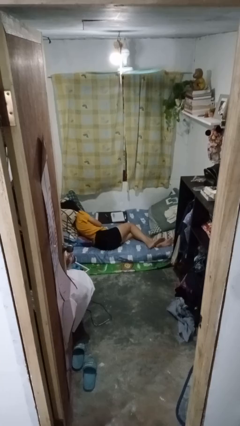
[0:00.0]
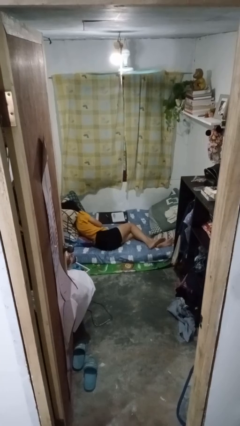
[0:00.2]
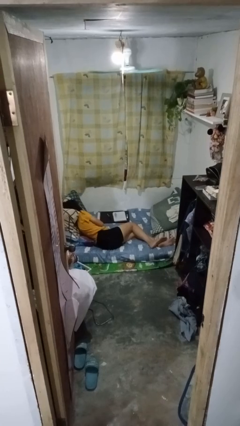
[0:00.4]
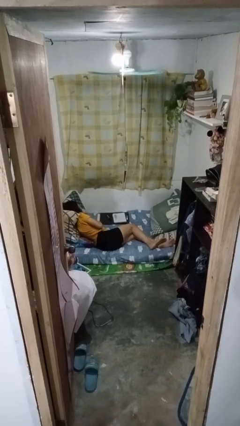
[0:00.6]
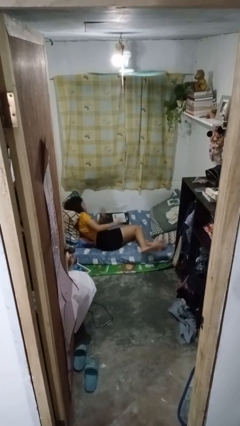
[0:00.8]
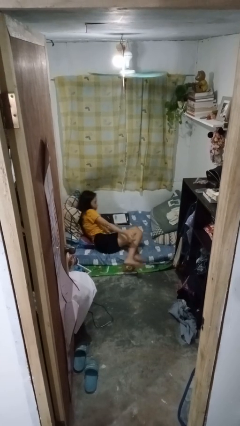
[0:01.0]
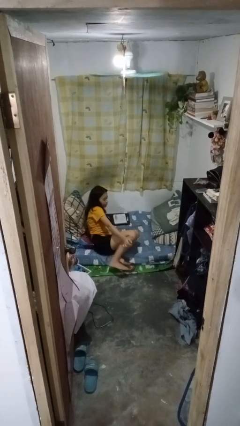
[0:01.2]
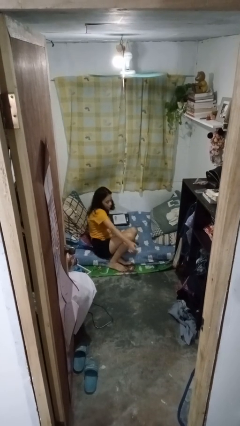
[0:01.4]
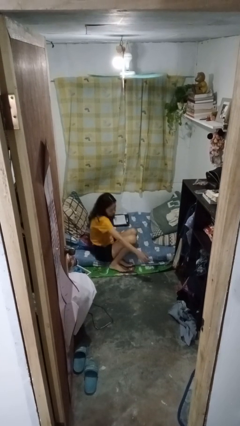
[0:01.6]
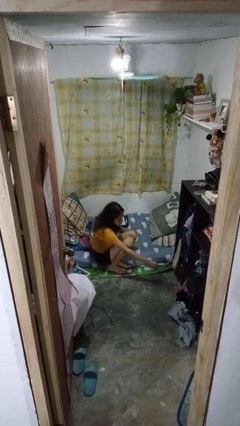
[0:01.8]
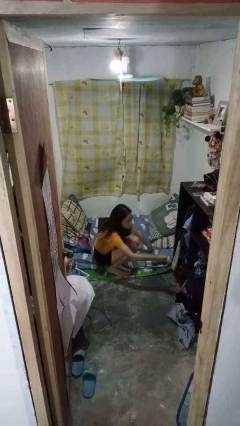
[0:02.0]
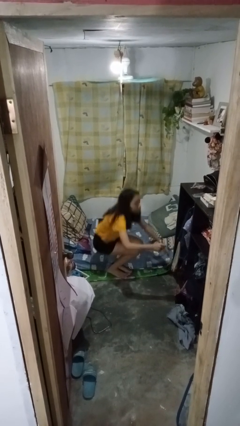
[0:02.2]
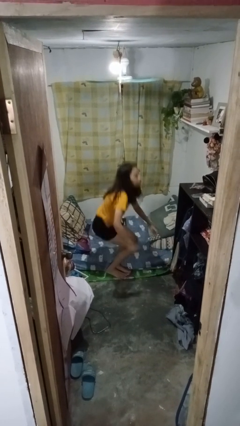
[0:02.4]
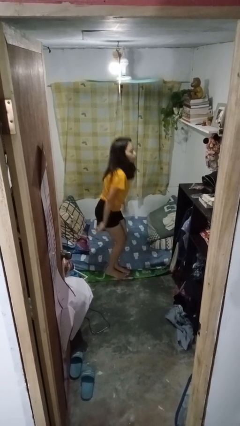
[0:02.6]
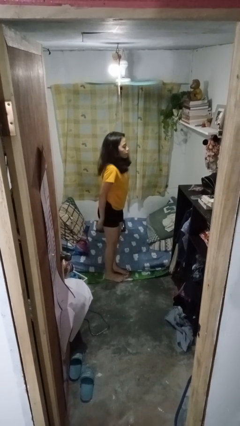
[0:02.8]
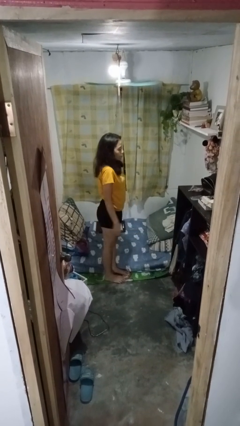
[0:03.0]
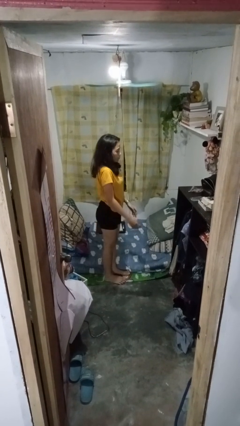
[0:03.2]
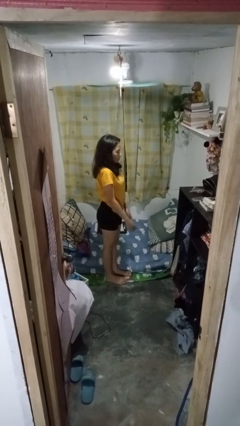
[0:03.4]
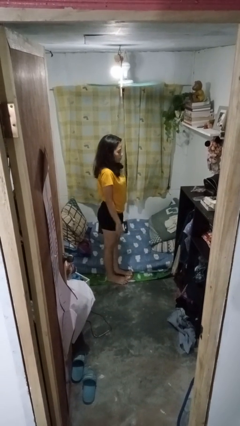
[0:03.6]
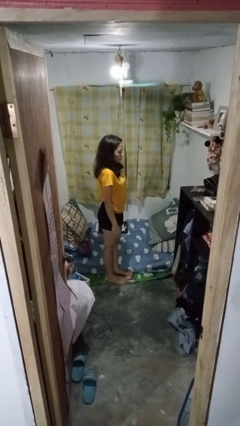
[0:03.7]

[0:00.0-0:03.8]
person stands up

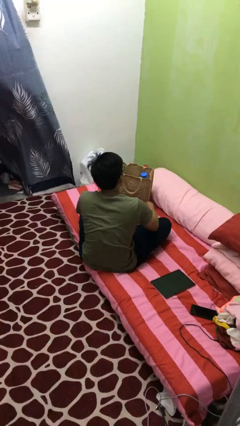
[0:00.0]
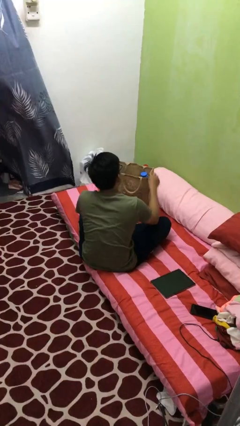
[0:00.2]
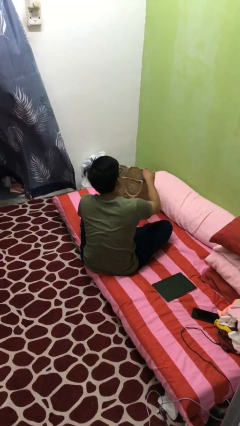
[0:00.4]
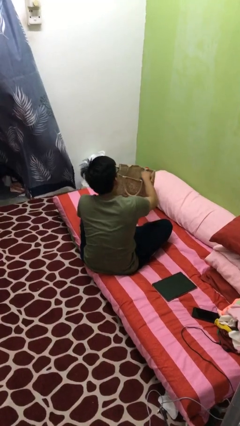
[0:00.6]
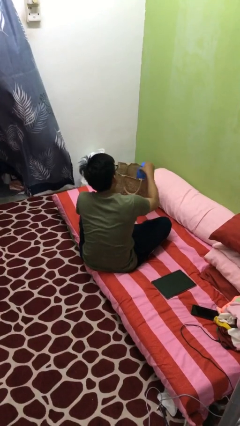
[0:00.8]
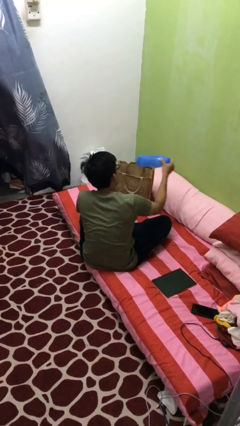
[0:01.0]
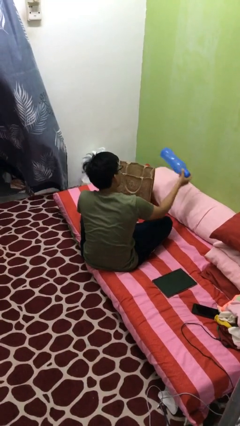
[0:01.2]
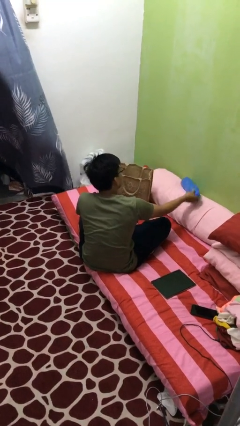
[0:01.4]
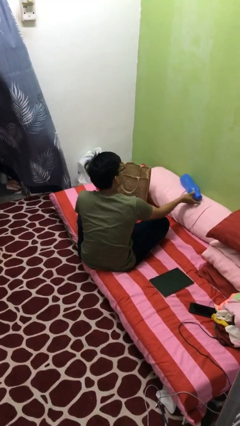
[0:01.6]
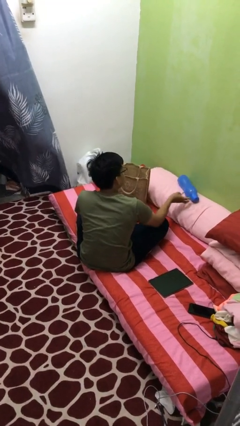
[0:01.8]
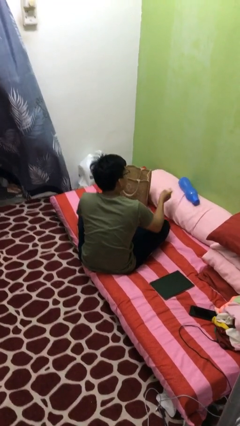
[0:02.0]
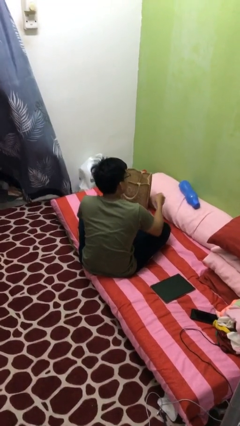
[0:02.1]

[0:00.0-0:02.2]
person takes object from bag

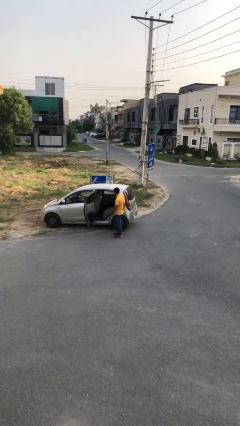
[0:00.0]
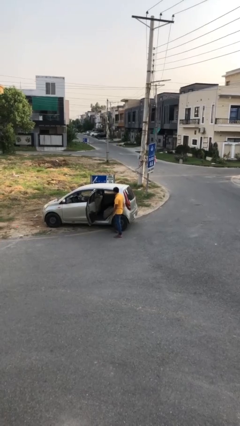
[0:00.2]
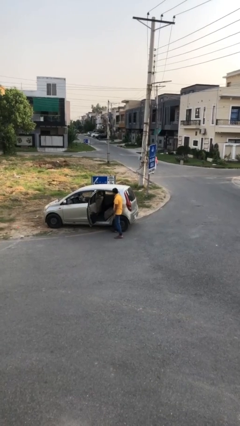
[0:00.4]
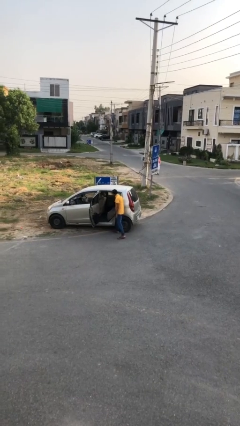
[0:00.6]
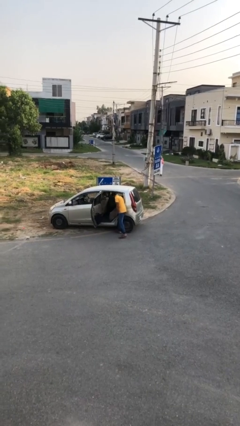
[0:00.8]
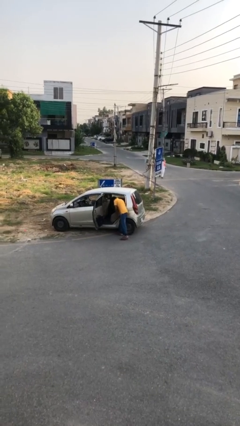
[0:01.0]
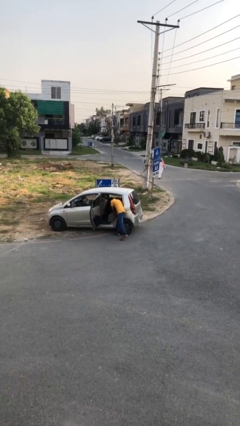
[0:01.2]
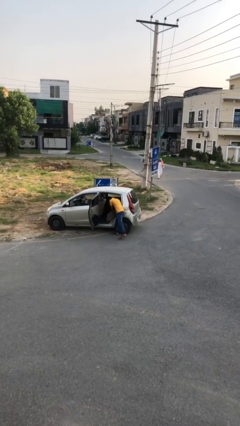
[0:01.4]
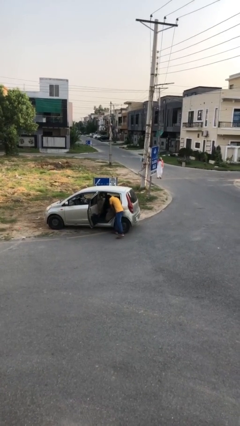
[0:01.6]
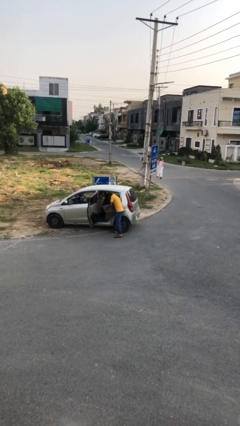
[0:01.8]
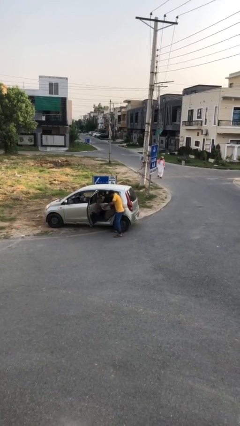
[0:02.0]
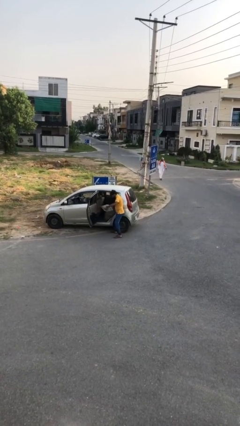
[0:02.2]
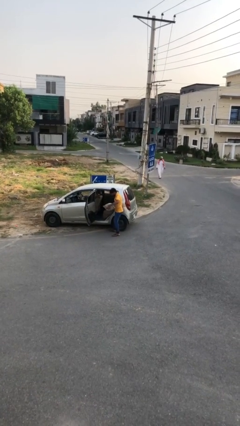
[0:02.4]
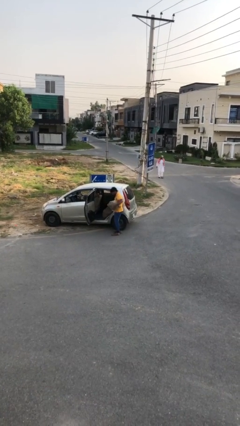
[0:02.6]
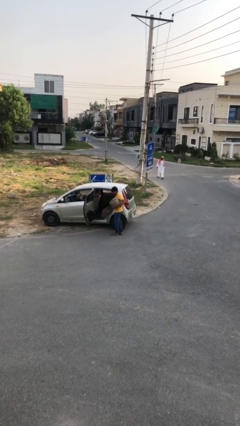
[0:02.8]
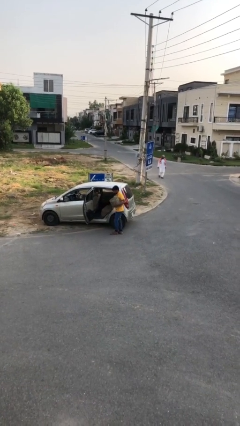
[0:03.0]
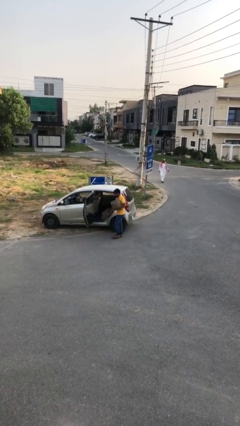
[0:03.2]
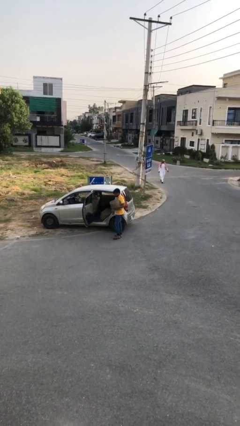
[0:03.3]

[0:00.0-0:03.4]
person unloads car

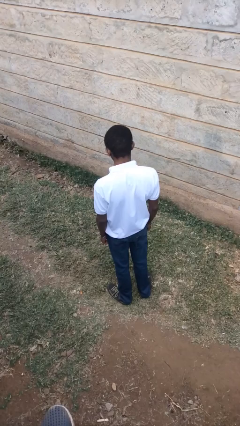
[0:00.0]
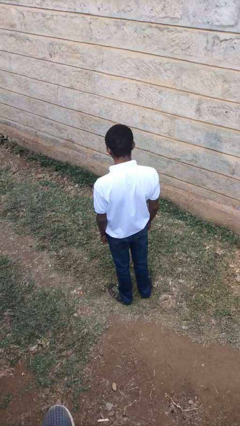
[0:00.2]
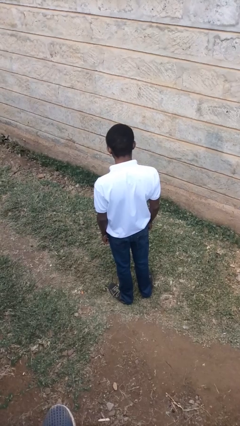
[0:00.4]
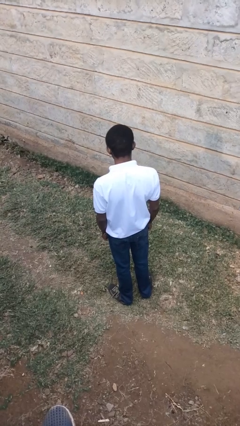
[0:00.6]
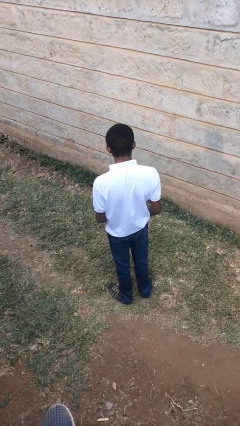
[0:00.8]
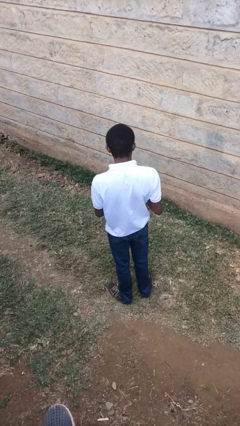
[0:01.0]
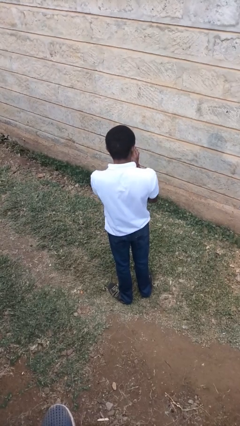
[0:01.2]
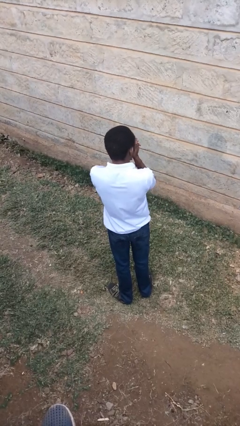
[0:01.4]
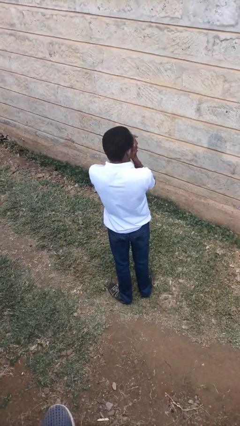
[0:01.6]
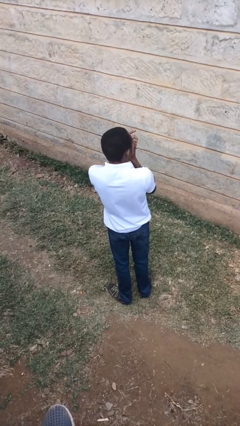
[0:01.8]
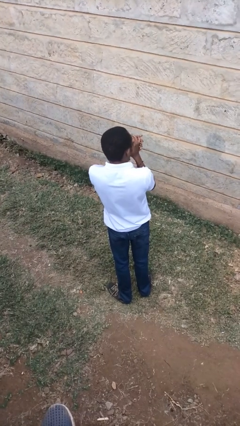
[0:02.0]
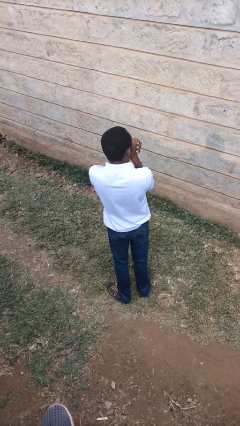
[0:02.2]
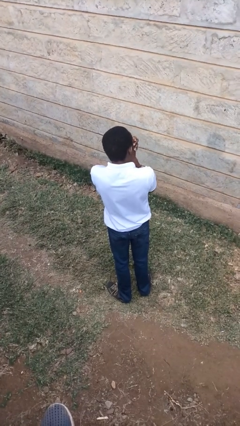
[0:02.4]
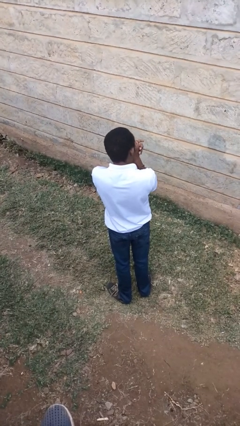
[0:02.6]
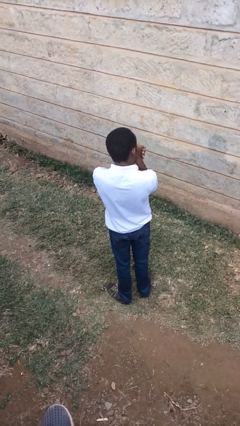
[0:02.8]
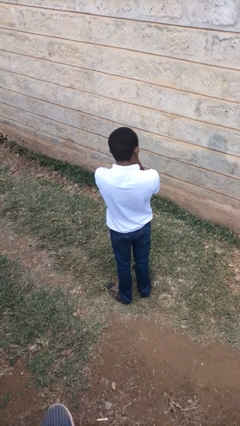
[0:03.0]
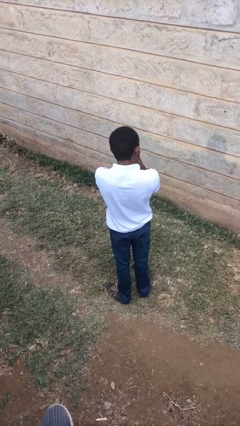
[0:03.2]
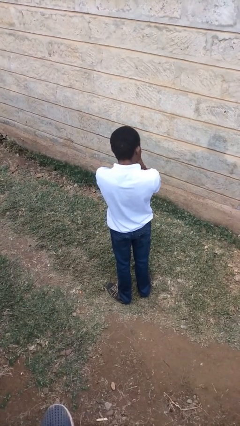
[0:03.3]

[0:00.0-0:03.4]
person blows into hands

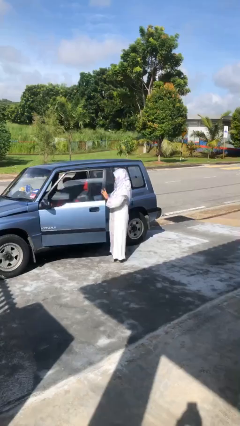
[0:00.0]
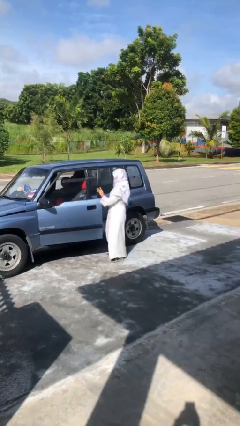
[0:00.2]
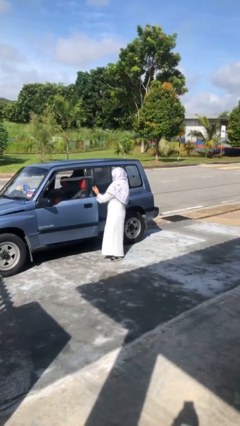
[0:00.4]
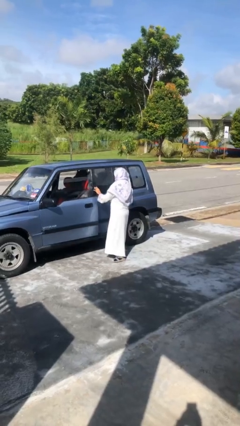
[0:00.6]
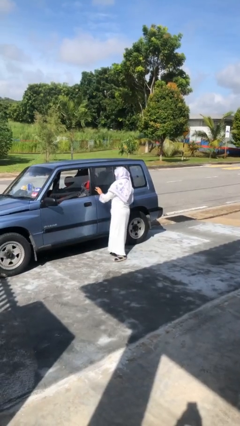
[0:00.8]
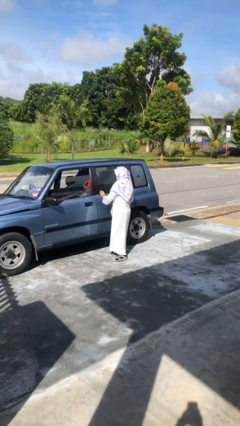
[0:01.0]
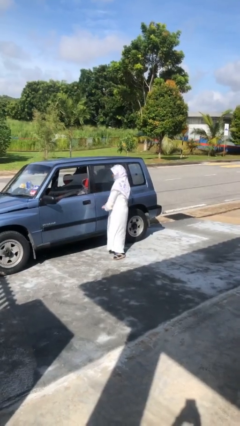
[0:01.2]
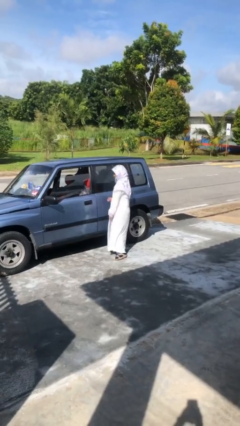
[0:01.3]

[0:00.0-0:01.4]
person closes car door

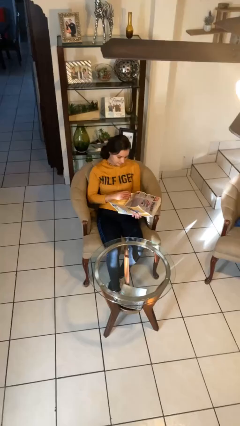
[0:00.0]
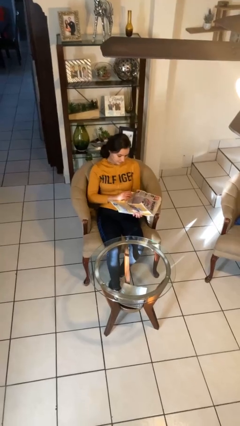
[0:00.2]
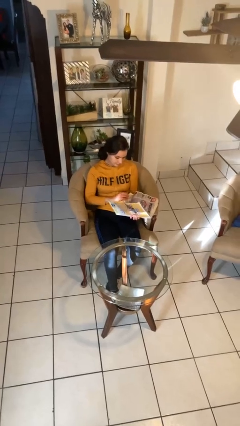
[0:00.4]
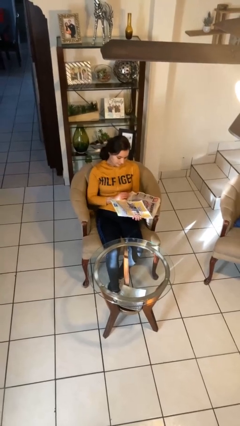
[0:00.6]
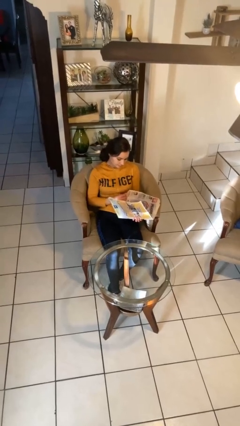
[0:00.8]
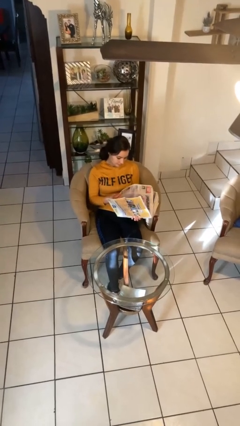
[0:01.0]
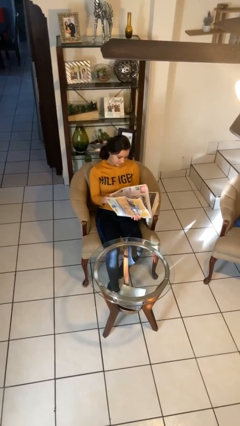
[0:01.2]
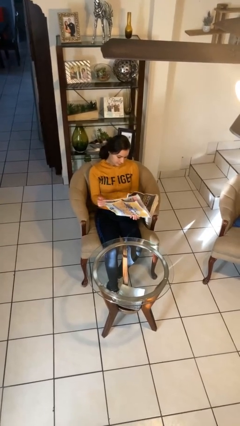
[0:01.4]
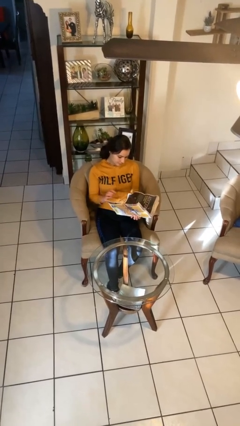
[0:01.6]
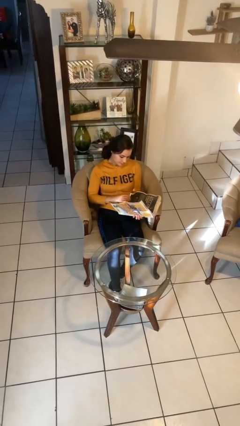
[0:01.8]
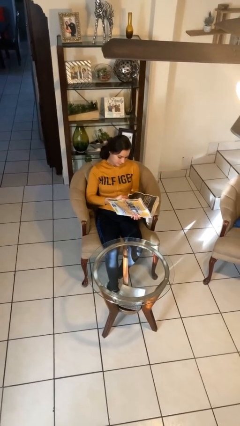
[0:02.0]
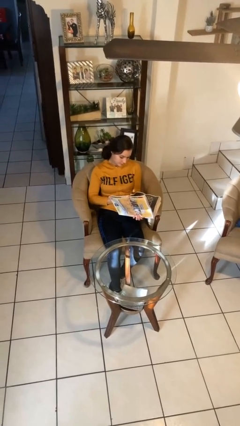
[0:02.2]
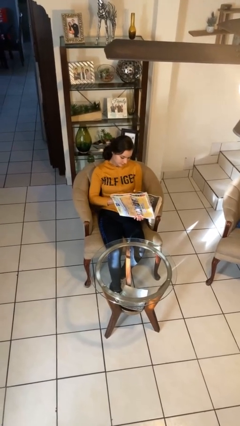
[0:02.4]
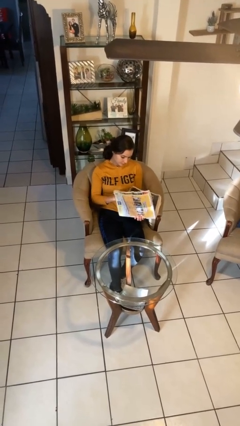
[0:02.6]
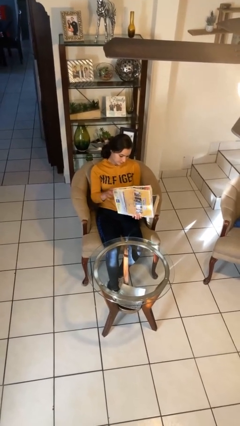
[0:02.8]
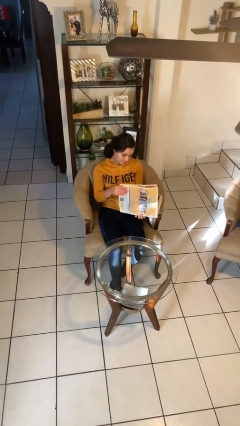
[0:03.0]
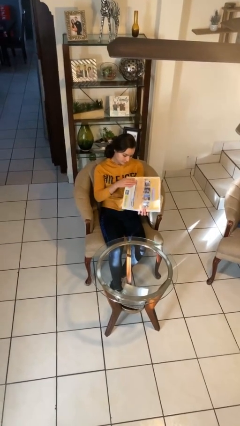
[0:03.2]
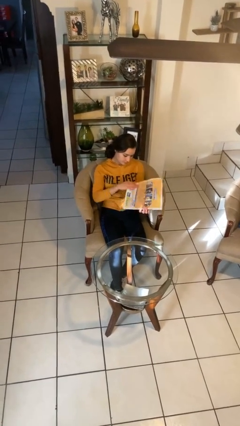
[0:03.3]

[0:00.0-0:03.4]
person reads newspaper
